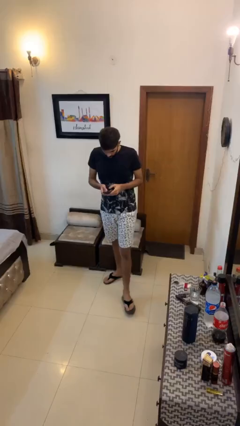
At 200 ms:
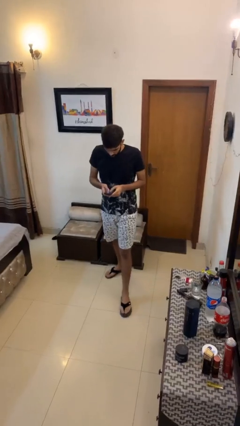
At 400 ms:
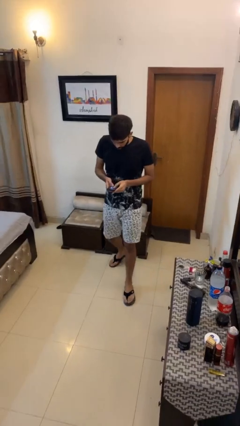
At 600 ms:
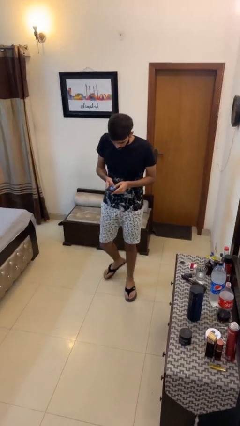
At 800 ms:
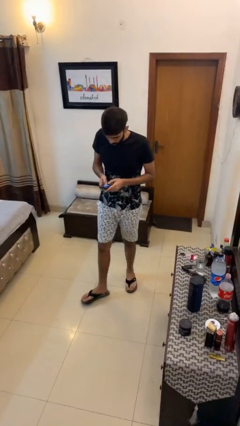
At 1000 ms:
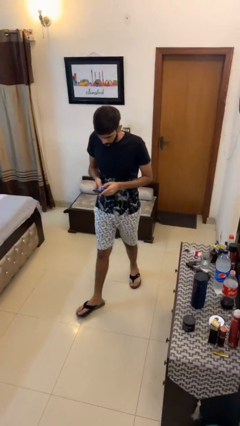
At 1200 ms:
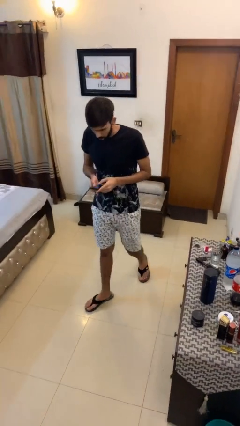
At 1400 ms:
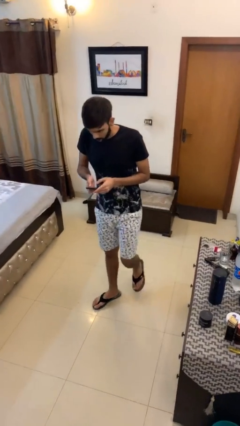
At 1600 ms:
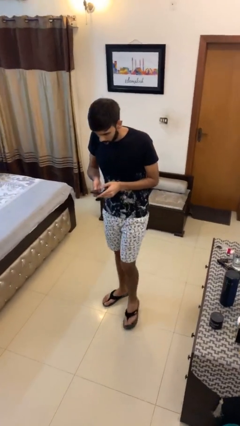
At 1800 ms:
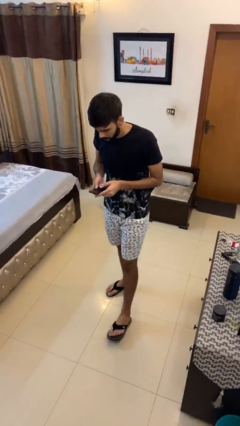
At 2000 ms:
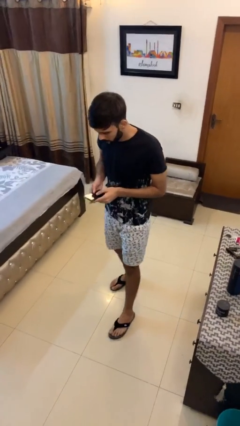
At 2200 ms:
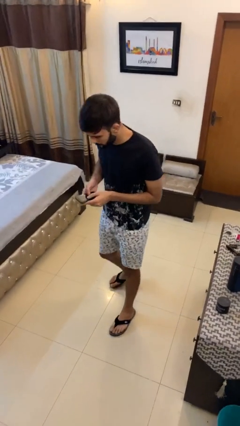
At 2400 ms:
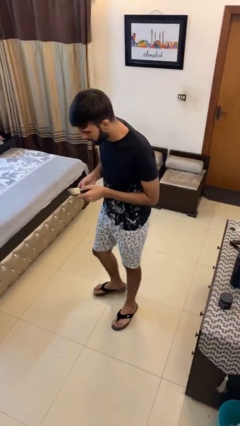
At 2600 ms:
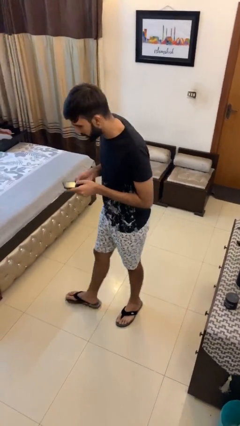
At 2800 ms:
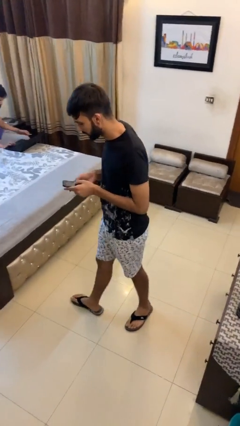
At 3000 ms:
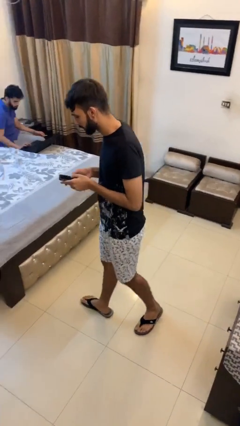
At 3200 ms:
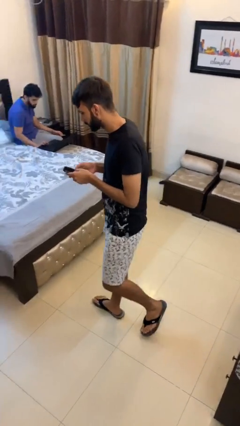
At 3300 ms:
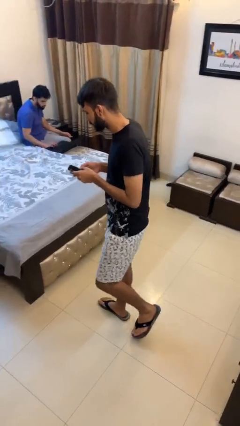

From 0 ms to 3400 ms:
person texts on phone

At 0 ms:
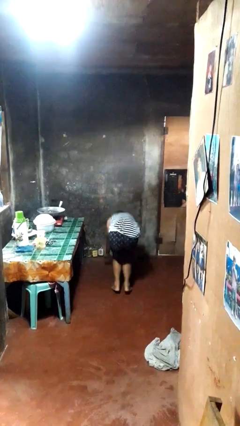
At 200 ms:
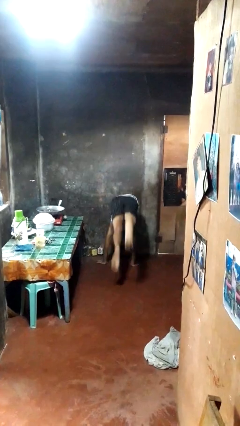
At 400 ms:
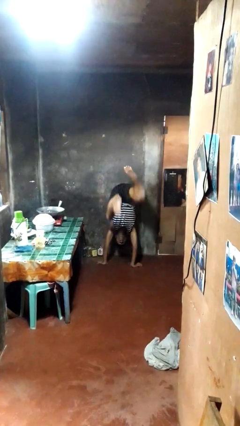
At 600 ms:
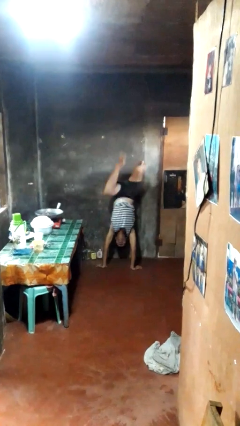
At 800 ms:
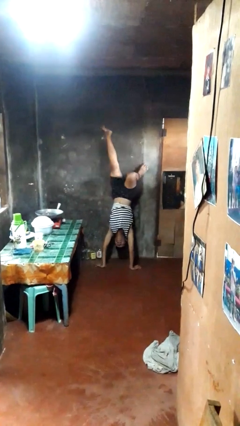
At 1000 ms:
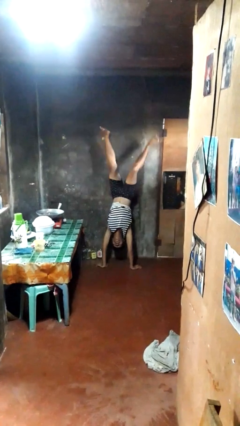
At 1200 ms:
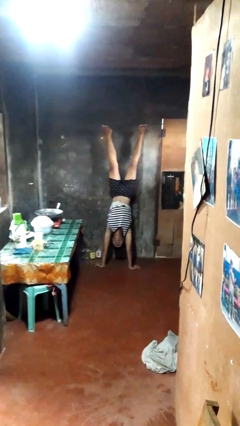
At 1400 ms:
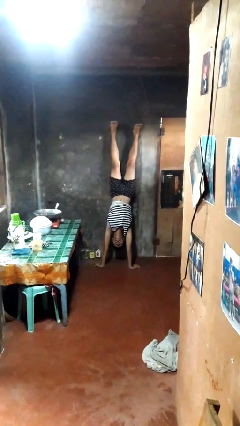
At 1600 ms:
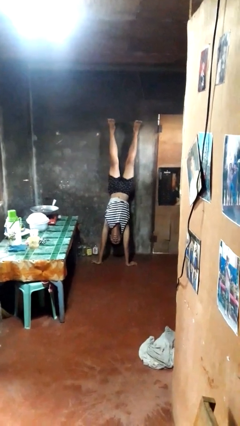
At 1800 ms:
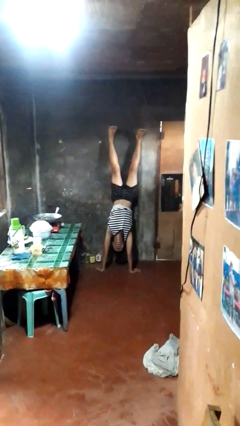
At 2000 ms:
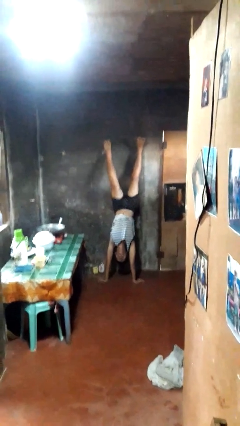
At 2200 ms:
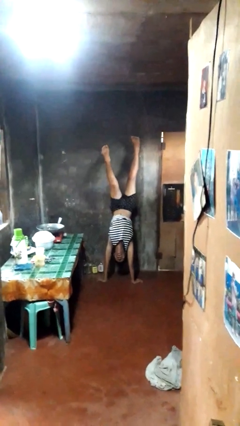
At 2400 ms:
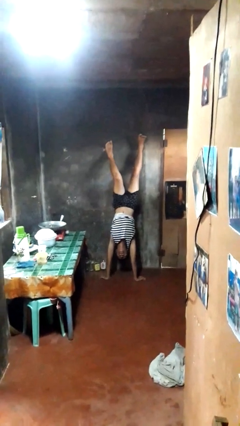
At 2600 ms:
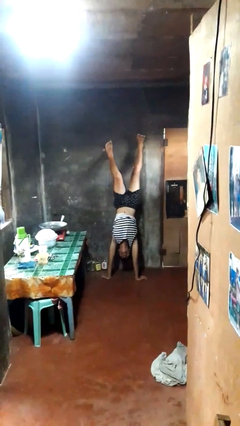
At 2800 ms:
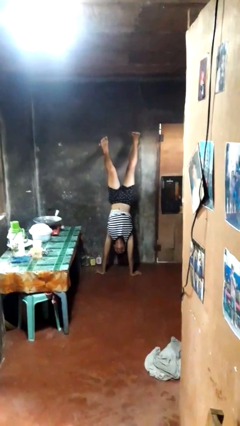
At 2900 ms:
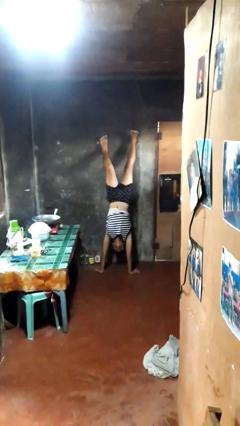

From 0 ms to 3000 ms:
person handstand

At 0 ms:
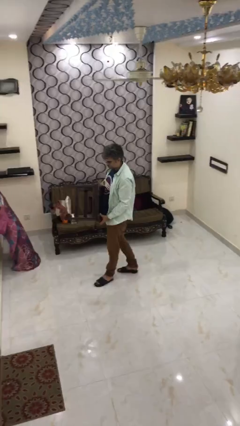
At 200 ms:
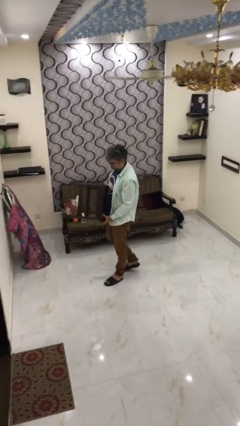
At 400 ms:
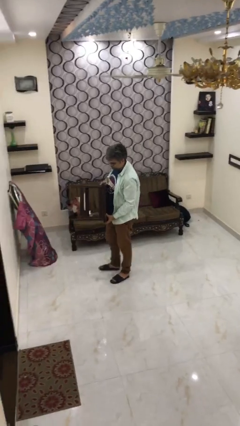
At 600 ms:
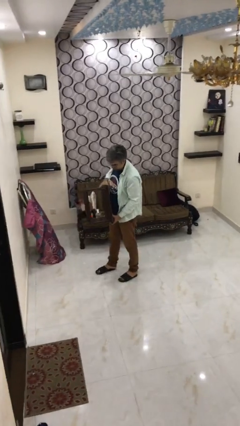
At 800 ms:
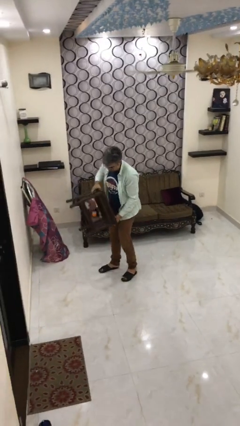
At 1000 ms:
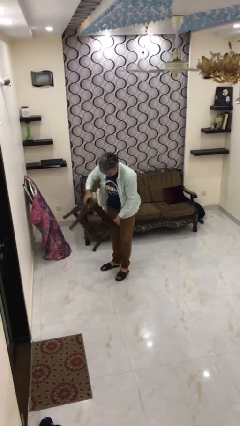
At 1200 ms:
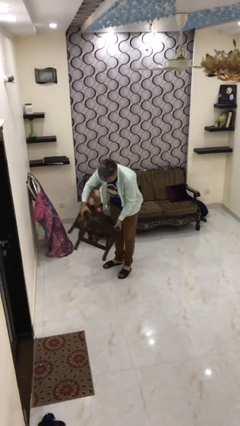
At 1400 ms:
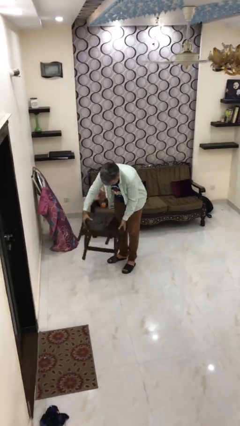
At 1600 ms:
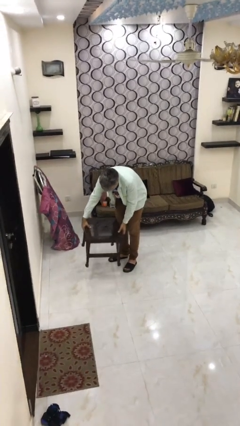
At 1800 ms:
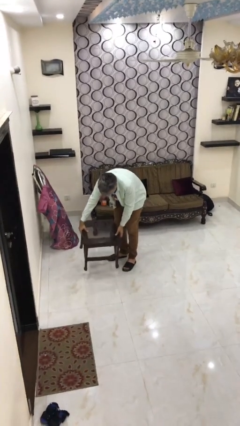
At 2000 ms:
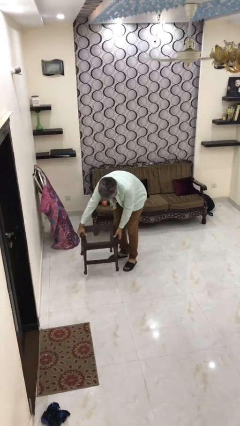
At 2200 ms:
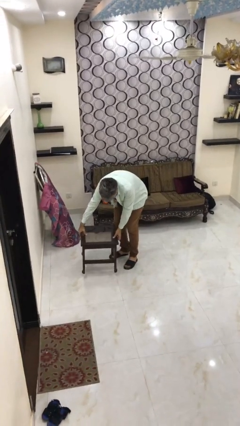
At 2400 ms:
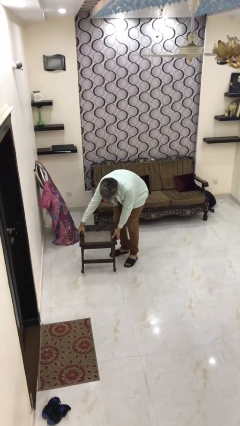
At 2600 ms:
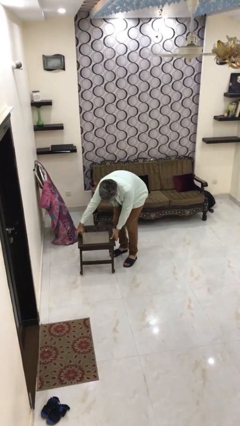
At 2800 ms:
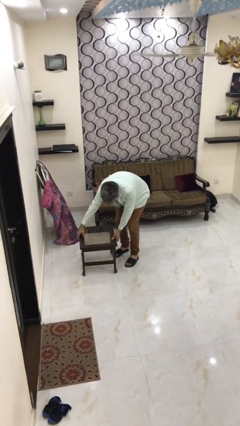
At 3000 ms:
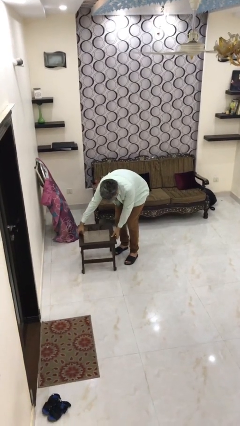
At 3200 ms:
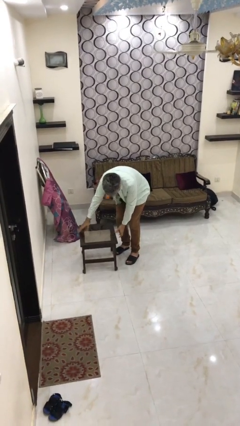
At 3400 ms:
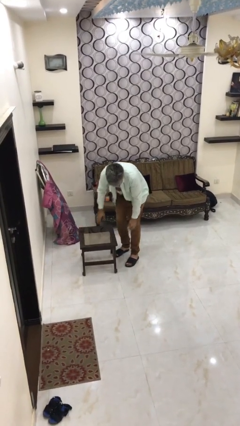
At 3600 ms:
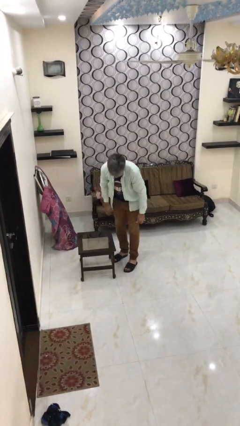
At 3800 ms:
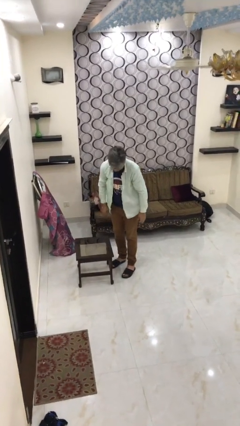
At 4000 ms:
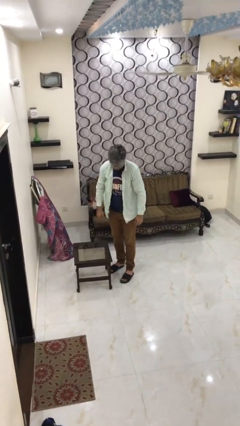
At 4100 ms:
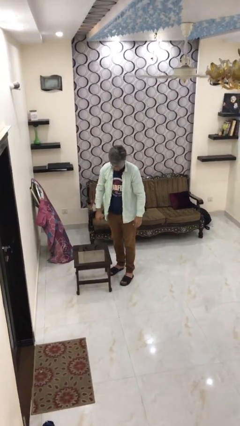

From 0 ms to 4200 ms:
person puts down object on floor

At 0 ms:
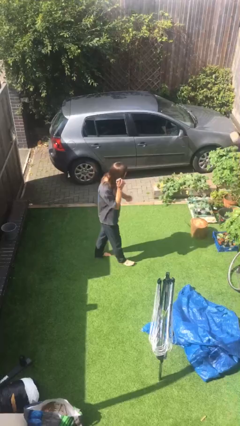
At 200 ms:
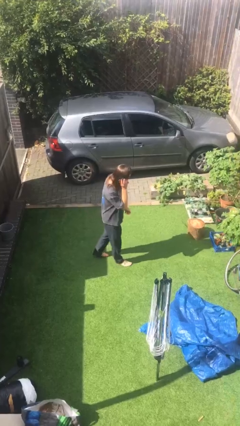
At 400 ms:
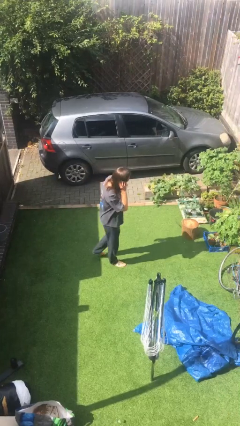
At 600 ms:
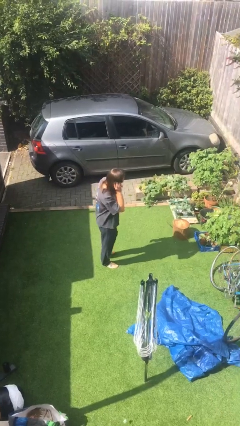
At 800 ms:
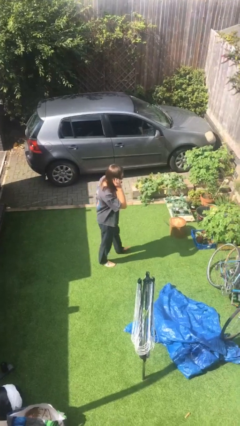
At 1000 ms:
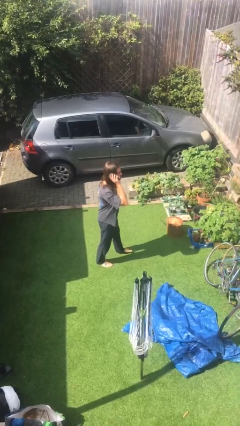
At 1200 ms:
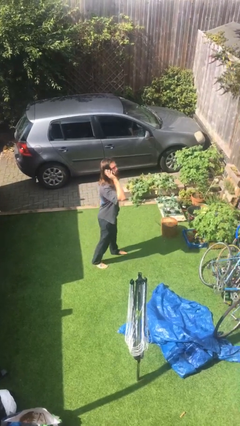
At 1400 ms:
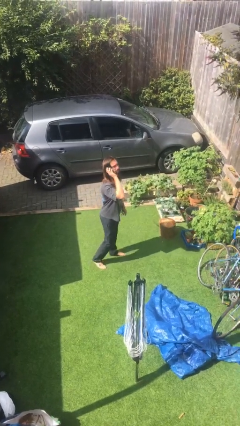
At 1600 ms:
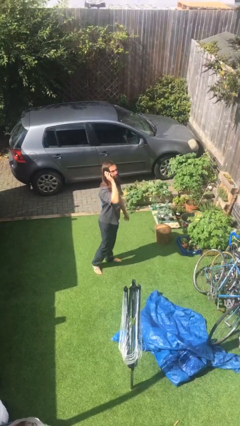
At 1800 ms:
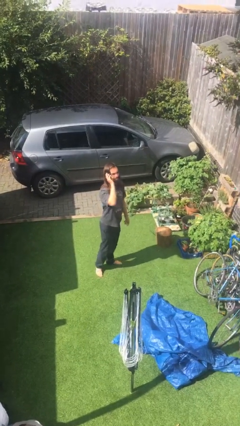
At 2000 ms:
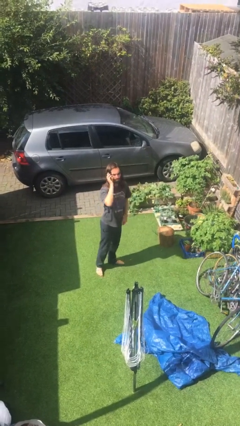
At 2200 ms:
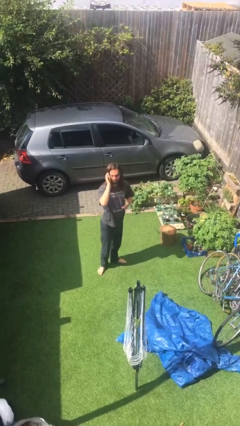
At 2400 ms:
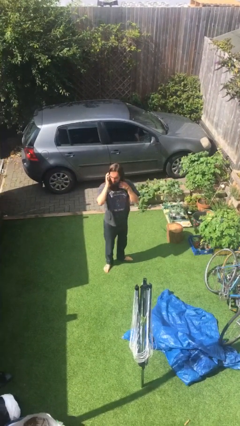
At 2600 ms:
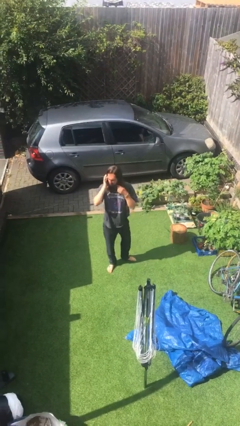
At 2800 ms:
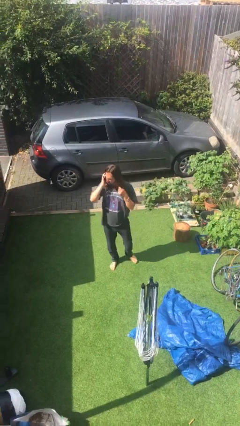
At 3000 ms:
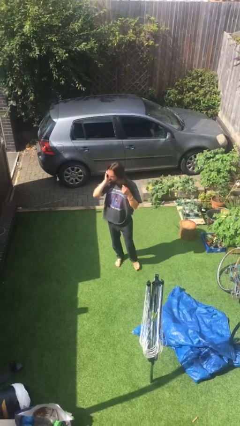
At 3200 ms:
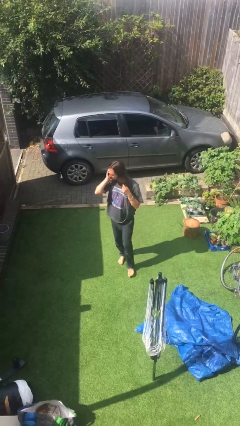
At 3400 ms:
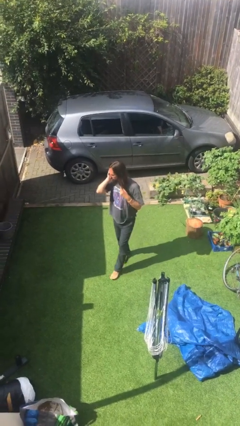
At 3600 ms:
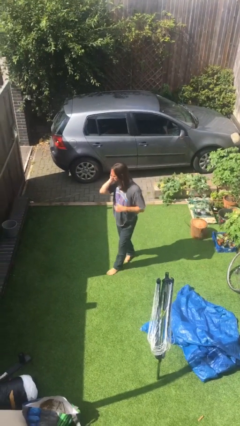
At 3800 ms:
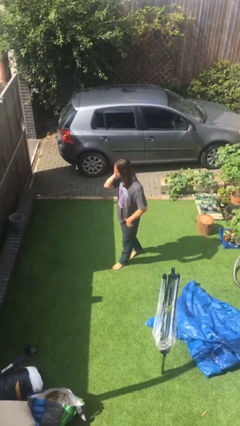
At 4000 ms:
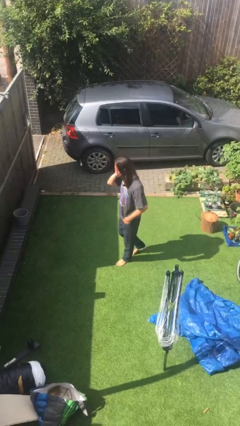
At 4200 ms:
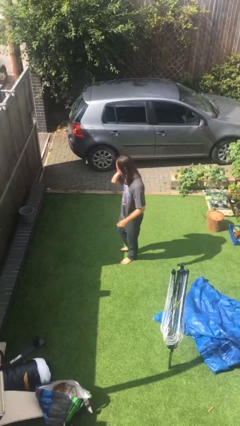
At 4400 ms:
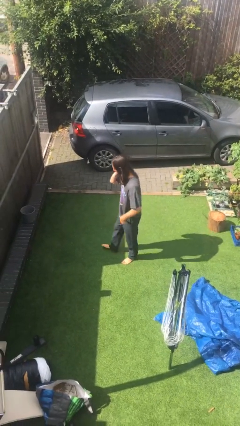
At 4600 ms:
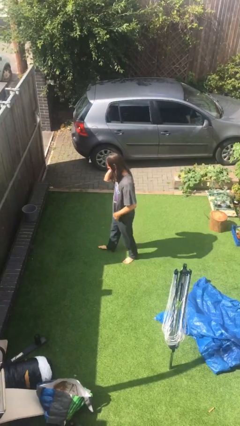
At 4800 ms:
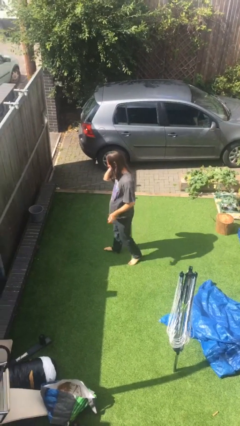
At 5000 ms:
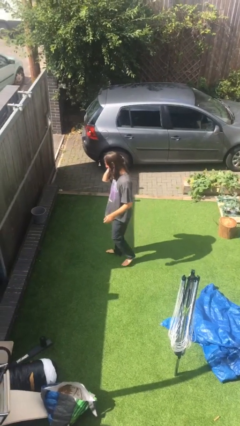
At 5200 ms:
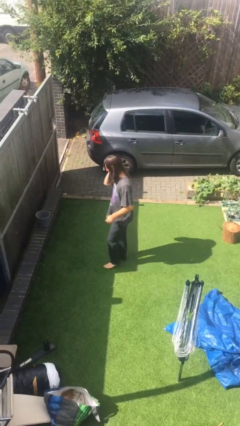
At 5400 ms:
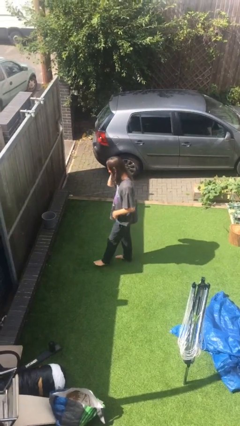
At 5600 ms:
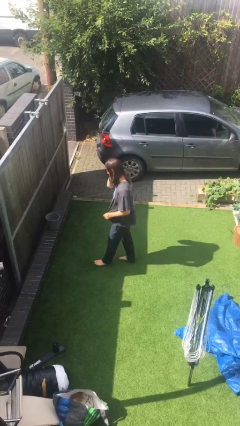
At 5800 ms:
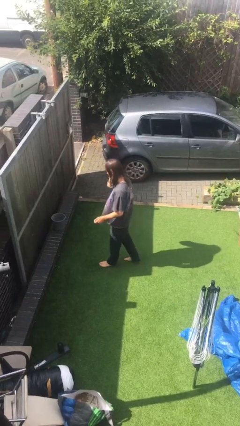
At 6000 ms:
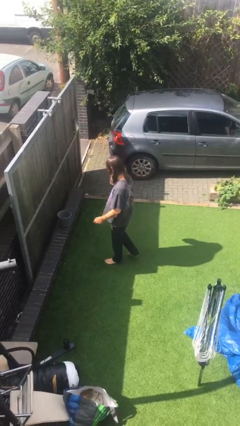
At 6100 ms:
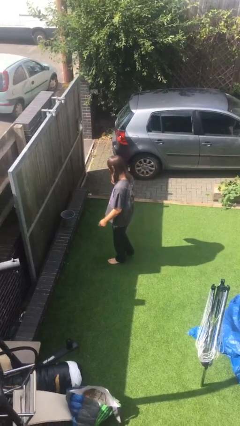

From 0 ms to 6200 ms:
person talks on phone

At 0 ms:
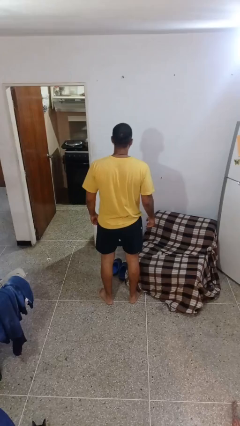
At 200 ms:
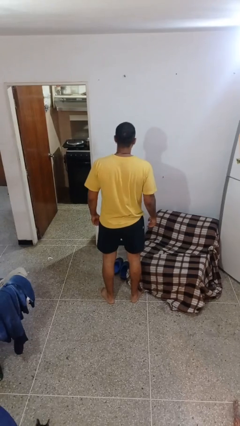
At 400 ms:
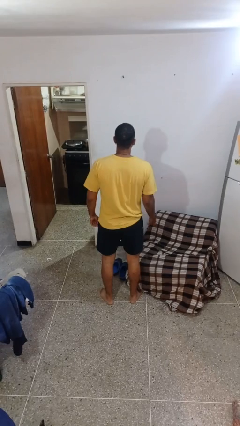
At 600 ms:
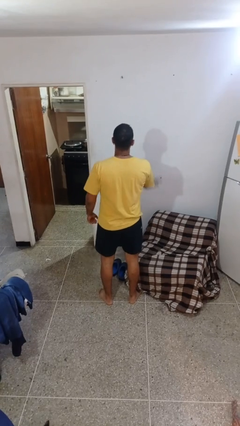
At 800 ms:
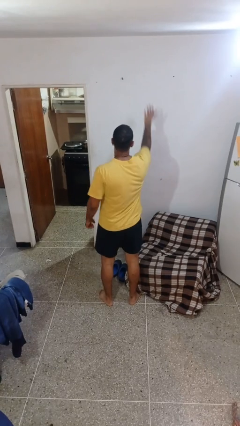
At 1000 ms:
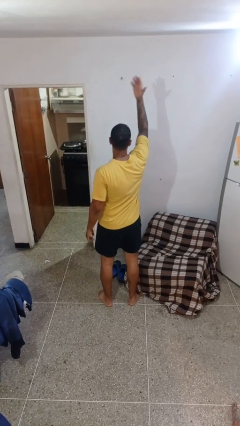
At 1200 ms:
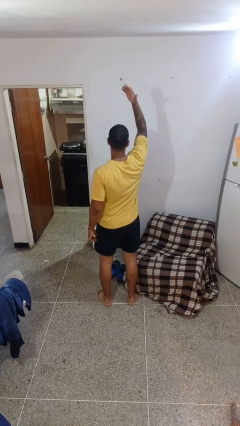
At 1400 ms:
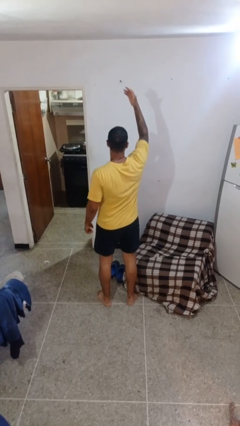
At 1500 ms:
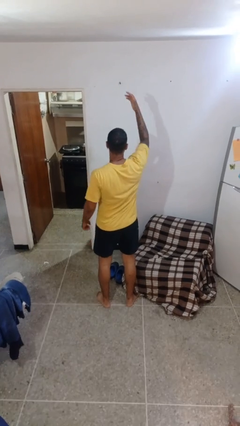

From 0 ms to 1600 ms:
person gestures swipe up
